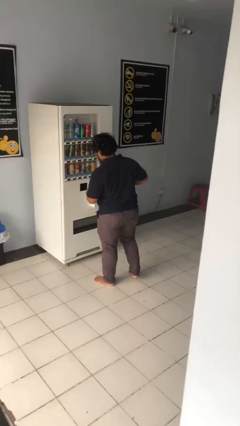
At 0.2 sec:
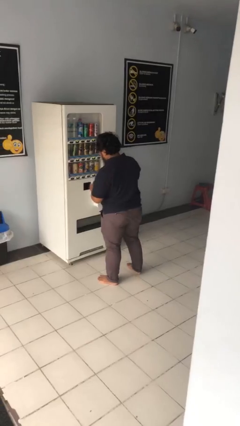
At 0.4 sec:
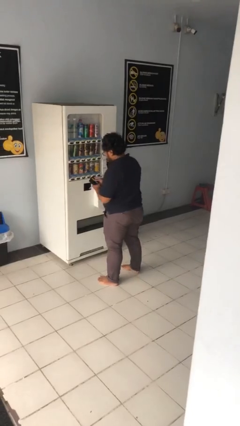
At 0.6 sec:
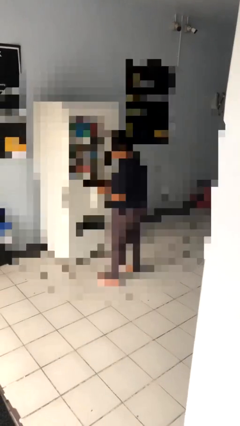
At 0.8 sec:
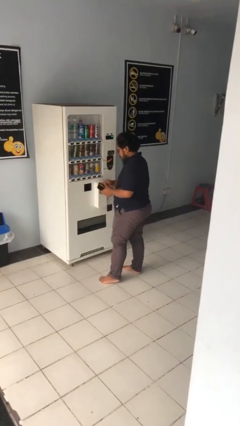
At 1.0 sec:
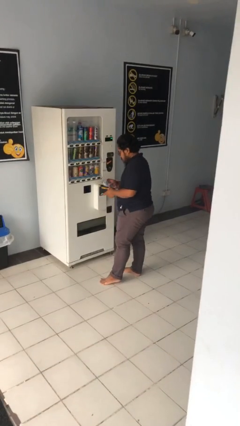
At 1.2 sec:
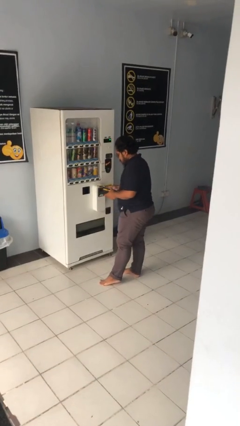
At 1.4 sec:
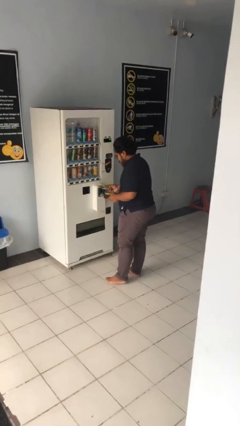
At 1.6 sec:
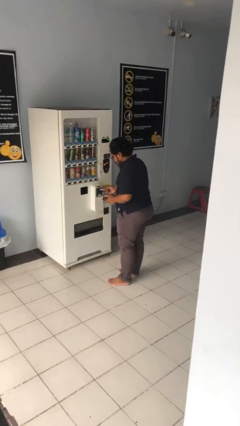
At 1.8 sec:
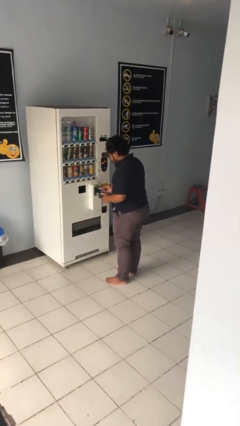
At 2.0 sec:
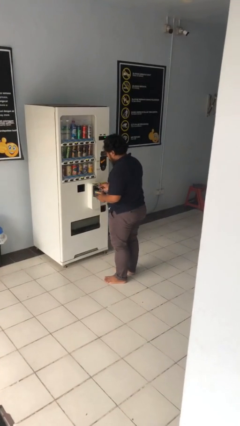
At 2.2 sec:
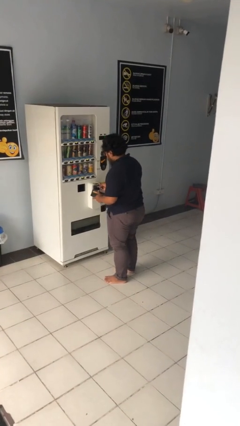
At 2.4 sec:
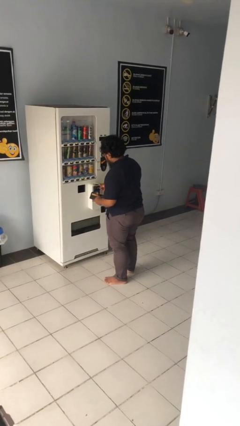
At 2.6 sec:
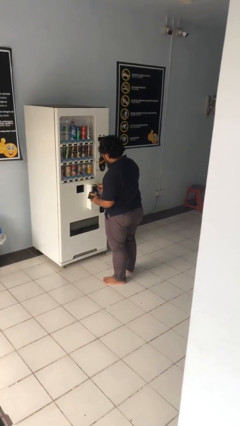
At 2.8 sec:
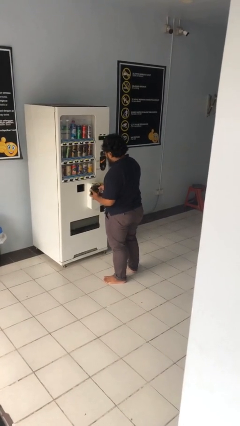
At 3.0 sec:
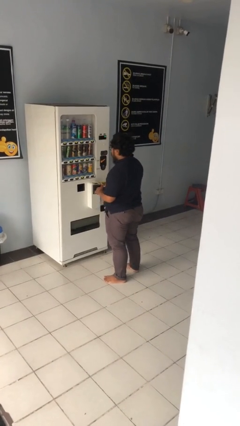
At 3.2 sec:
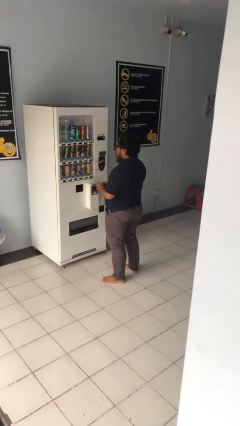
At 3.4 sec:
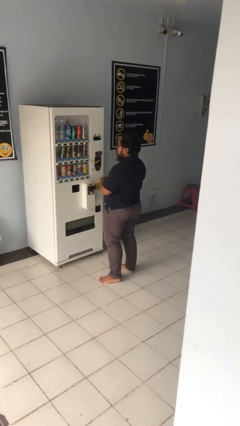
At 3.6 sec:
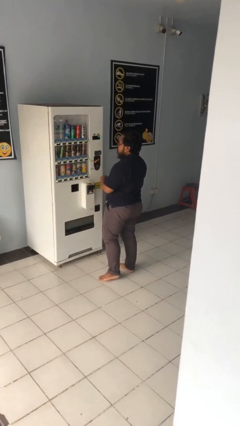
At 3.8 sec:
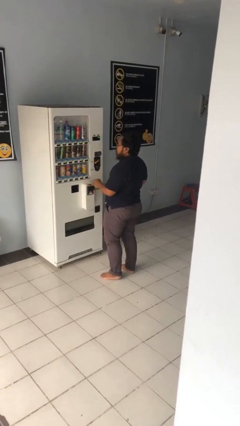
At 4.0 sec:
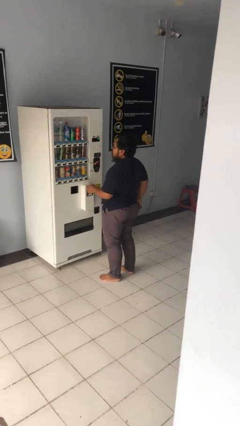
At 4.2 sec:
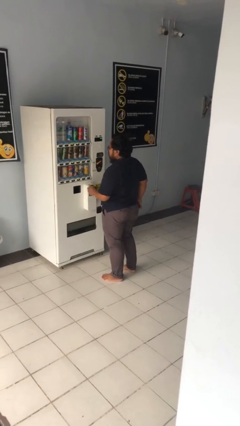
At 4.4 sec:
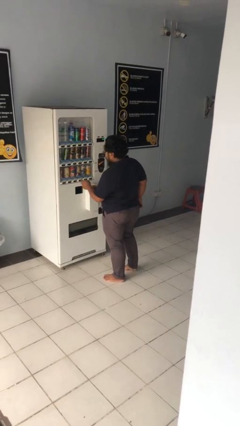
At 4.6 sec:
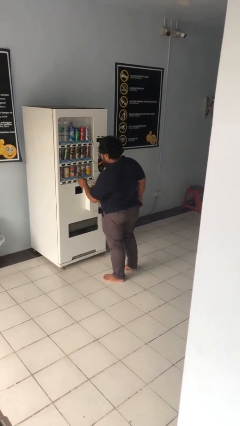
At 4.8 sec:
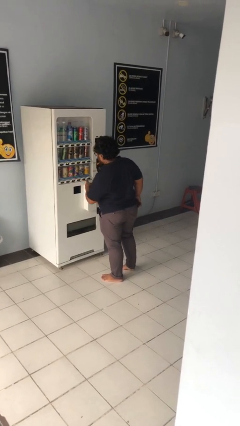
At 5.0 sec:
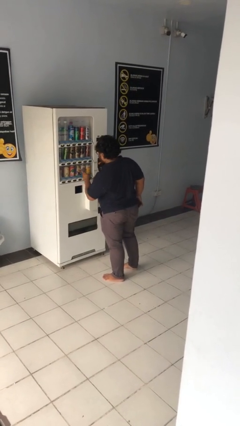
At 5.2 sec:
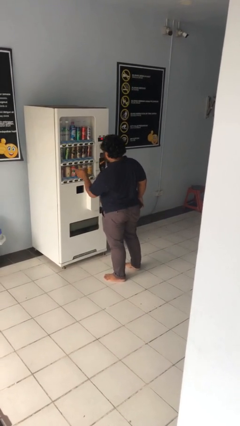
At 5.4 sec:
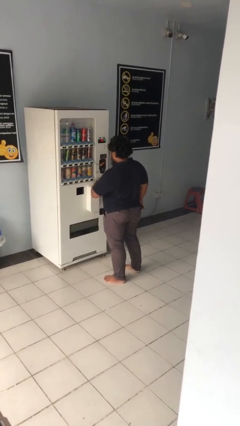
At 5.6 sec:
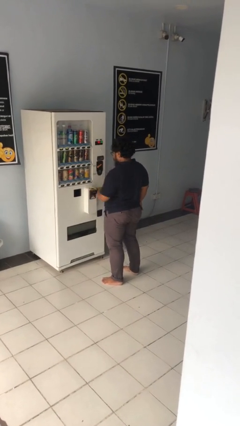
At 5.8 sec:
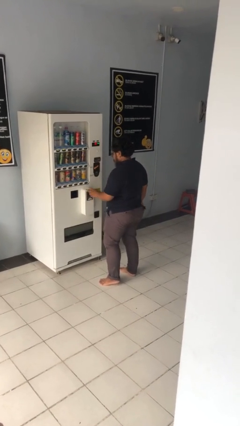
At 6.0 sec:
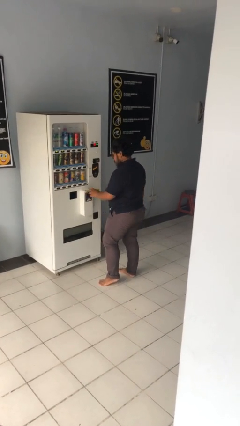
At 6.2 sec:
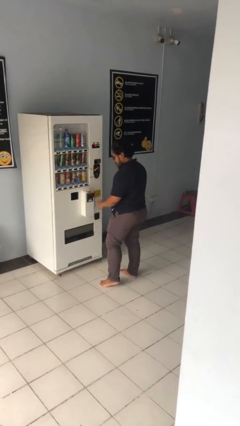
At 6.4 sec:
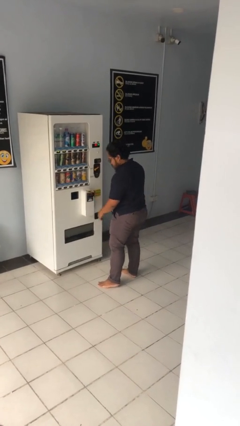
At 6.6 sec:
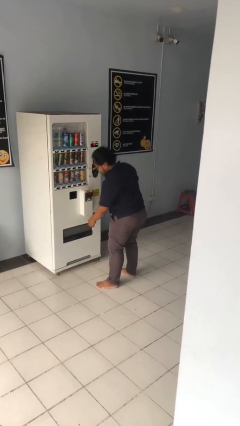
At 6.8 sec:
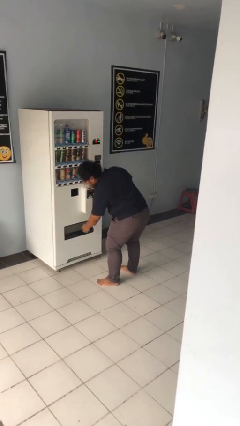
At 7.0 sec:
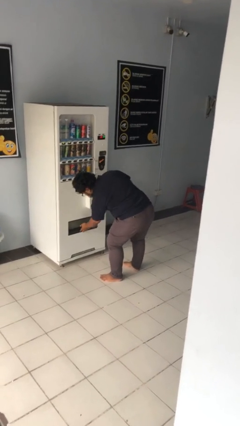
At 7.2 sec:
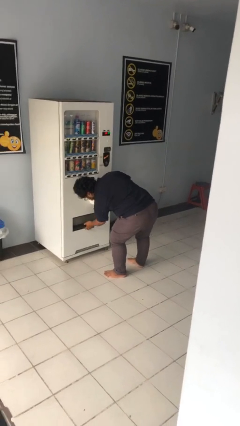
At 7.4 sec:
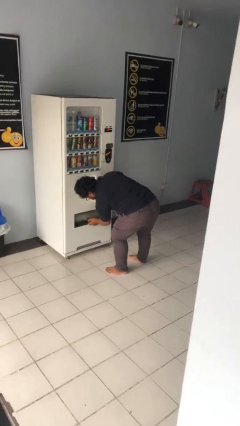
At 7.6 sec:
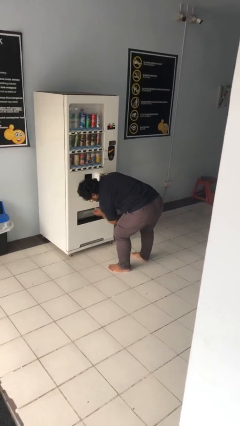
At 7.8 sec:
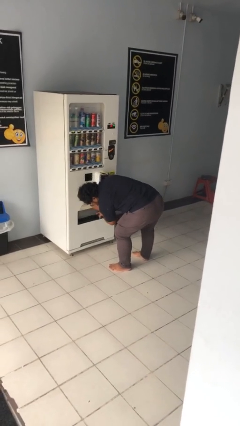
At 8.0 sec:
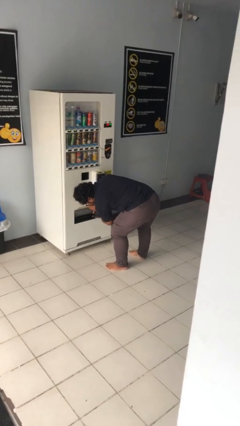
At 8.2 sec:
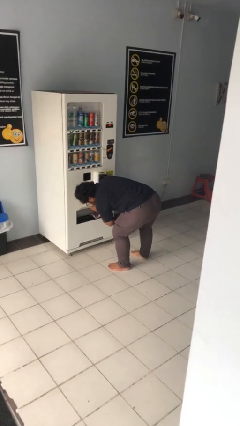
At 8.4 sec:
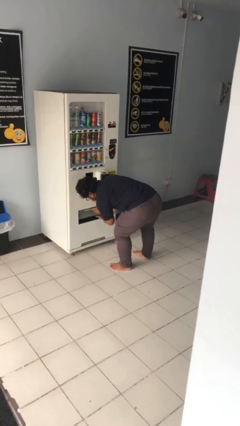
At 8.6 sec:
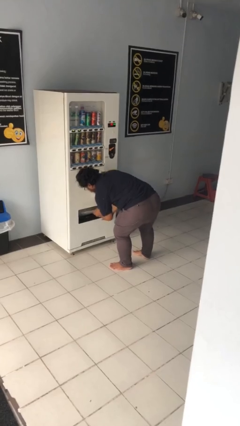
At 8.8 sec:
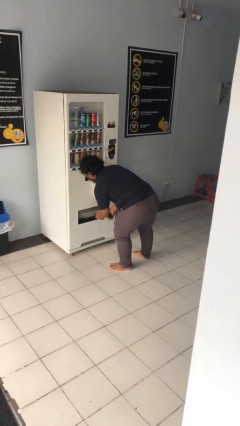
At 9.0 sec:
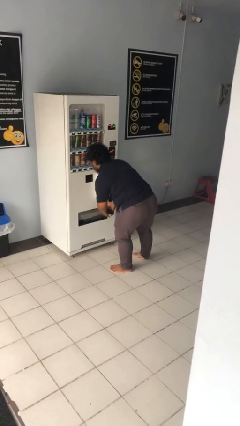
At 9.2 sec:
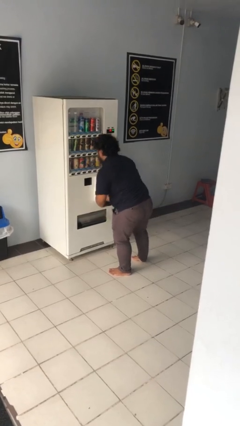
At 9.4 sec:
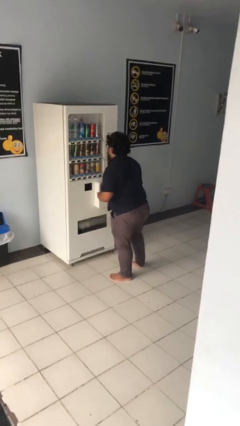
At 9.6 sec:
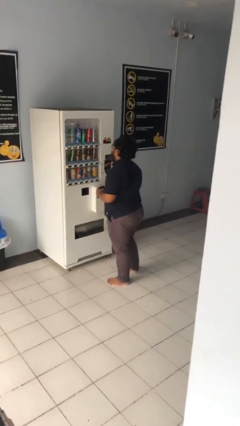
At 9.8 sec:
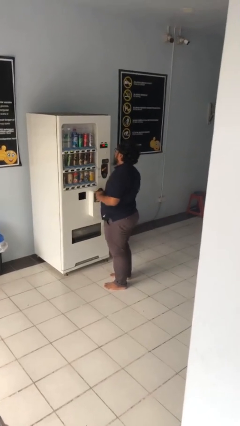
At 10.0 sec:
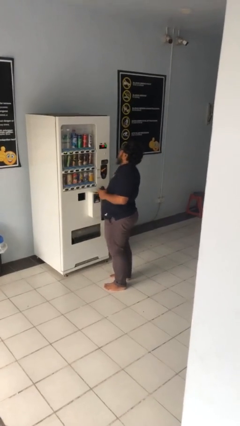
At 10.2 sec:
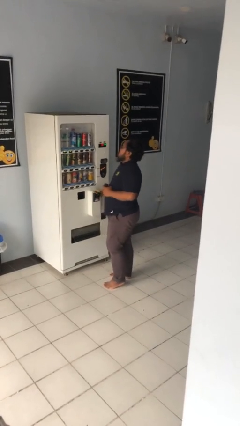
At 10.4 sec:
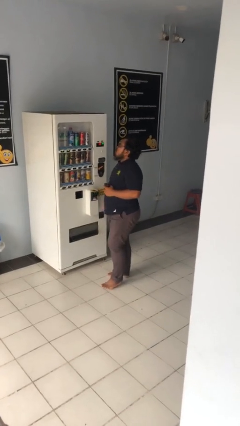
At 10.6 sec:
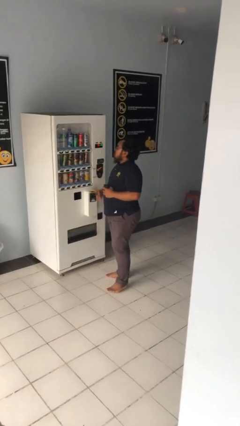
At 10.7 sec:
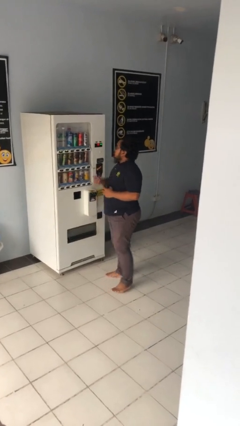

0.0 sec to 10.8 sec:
person purchases from machine

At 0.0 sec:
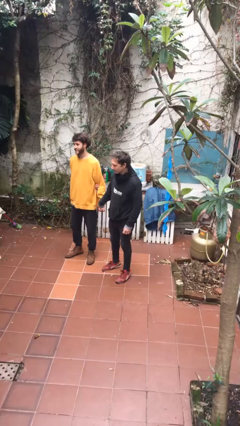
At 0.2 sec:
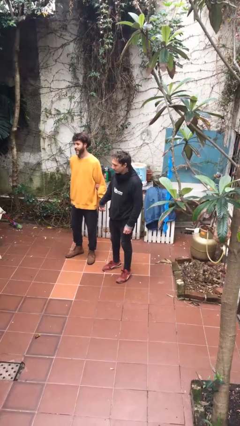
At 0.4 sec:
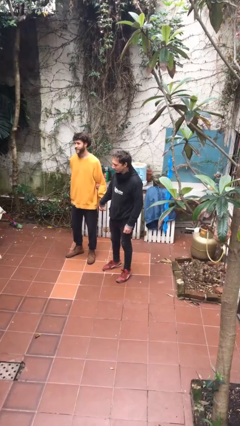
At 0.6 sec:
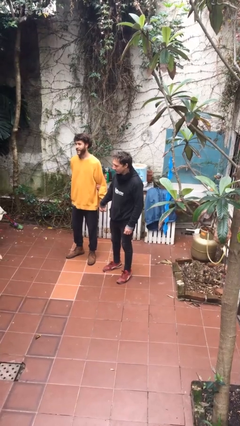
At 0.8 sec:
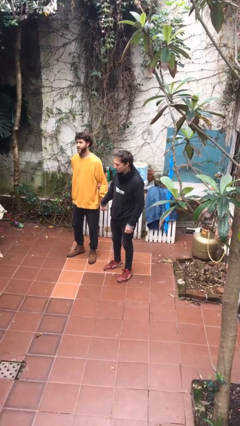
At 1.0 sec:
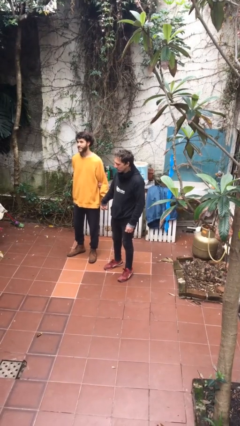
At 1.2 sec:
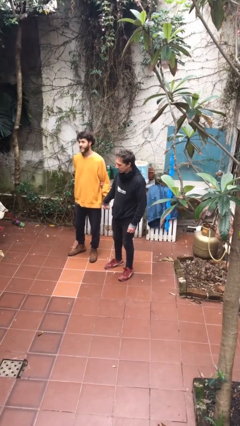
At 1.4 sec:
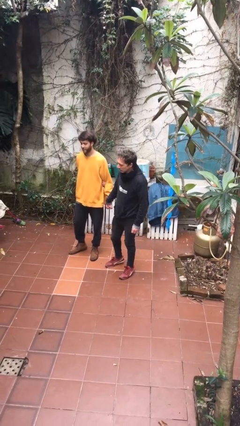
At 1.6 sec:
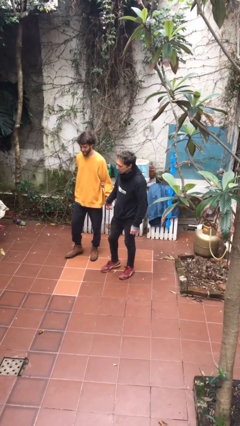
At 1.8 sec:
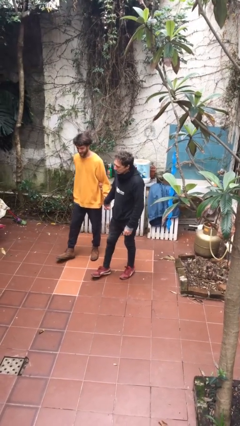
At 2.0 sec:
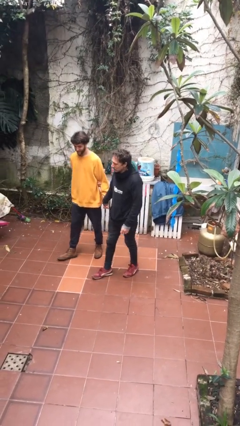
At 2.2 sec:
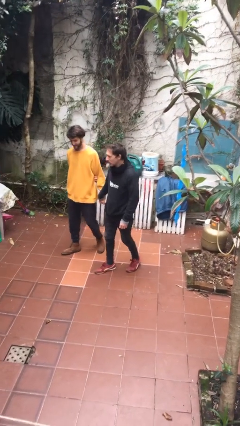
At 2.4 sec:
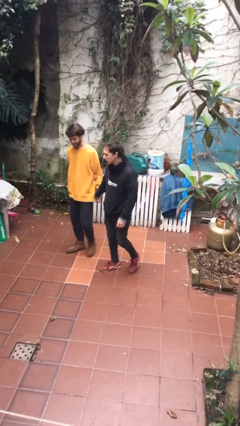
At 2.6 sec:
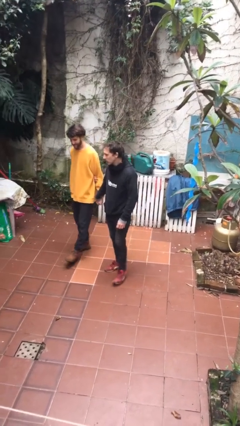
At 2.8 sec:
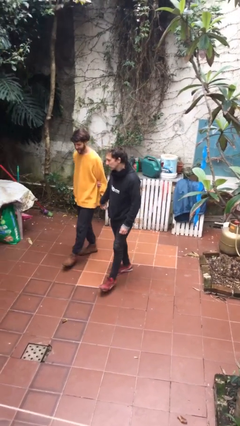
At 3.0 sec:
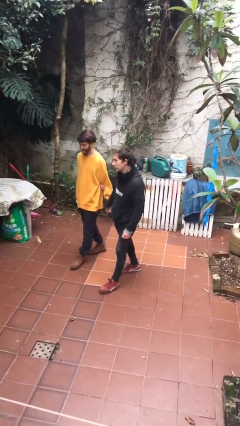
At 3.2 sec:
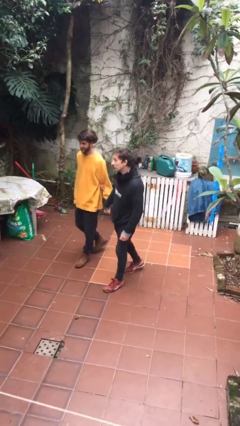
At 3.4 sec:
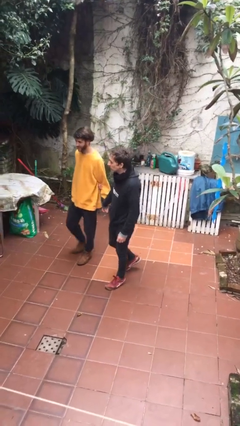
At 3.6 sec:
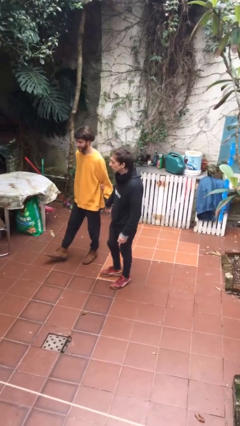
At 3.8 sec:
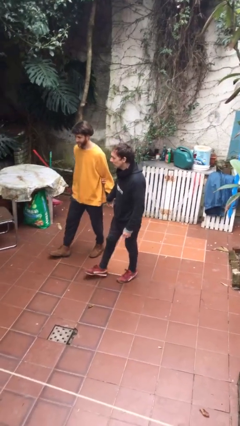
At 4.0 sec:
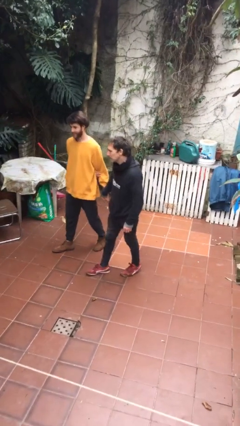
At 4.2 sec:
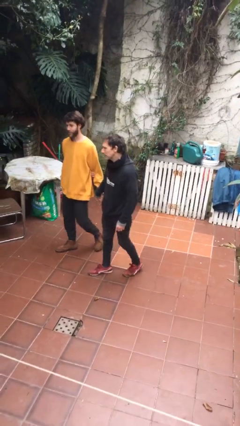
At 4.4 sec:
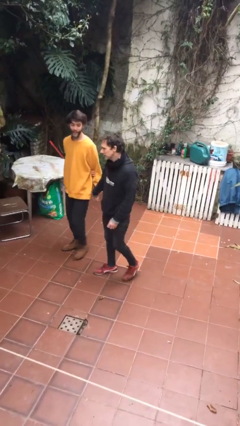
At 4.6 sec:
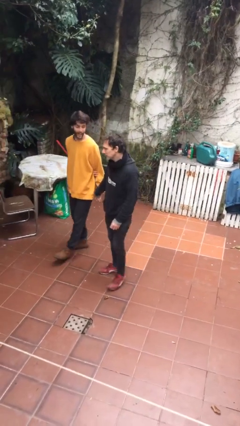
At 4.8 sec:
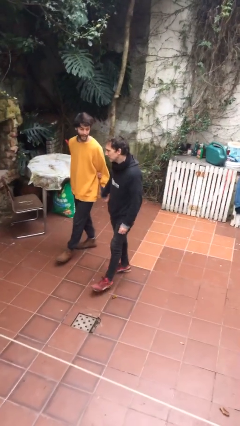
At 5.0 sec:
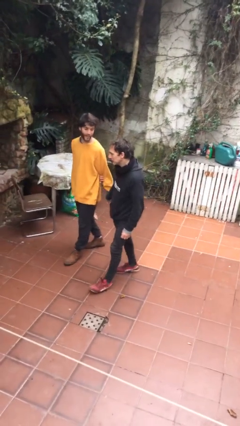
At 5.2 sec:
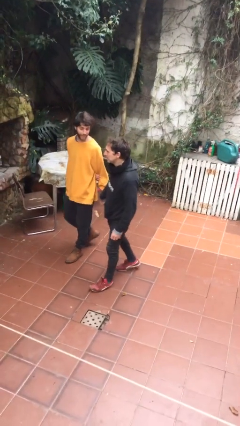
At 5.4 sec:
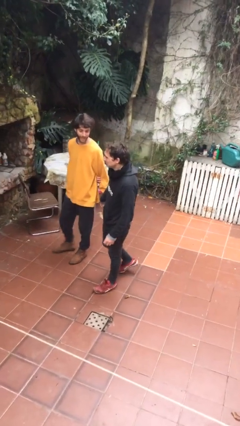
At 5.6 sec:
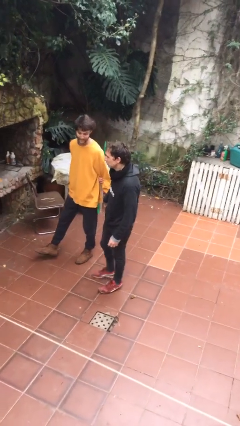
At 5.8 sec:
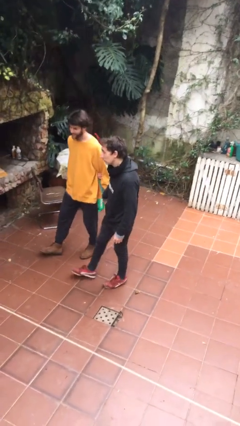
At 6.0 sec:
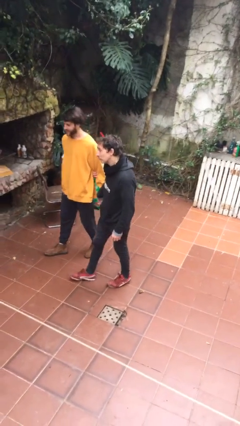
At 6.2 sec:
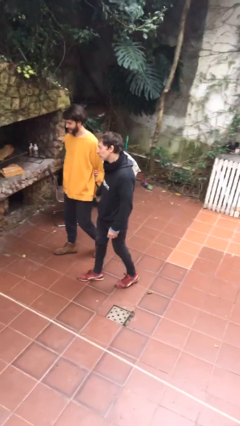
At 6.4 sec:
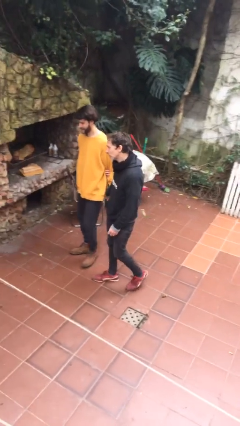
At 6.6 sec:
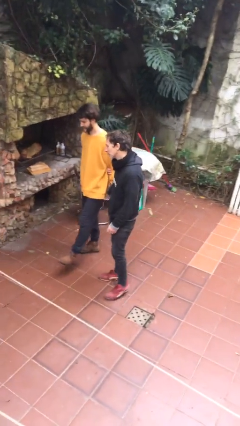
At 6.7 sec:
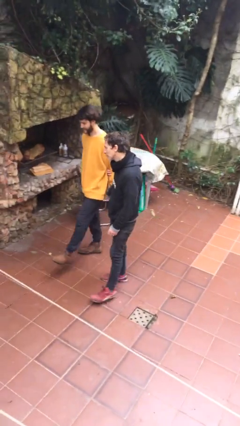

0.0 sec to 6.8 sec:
person holds hand

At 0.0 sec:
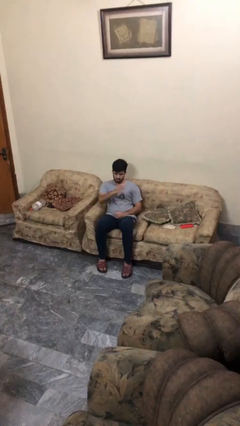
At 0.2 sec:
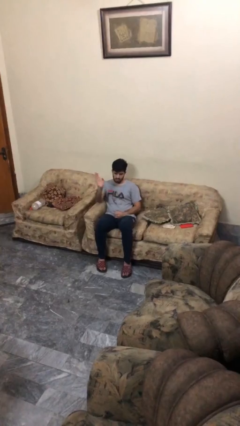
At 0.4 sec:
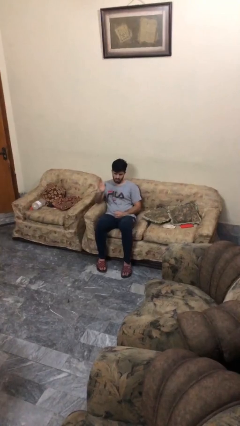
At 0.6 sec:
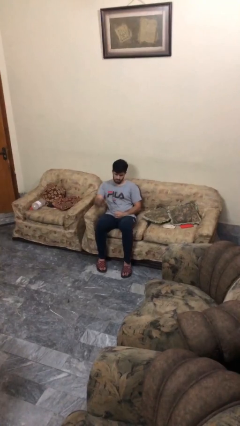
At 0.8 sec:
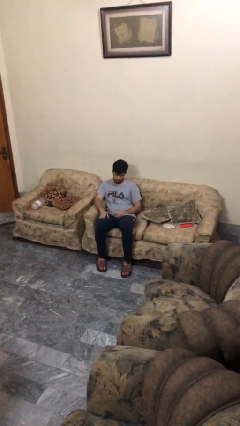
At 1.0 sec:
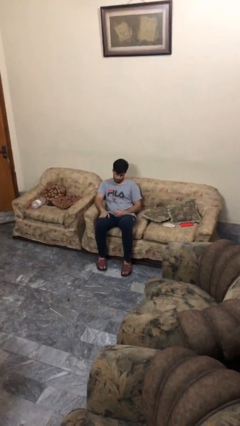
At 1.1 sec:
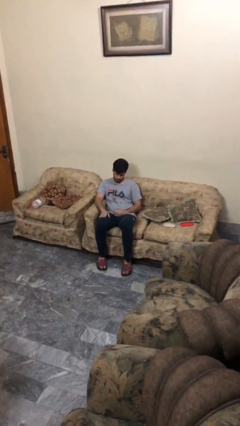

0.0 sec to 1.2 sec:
person gestures swipe right
